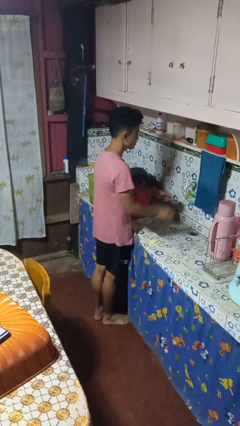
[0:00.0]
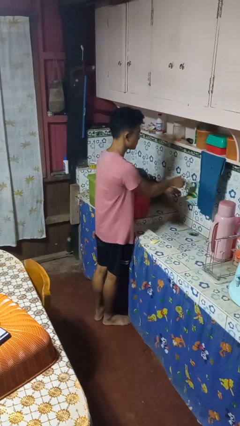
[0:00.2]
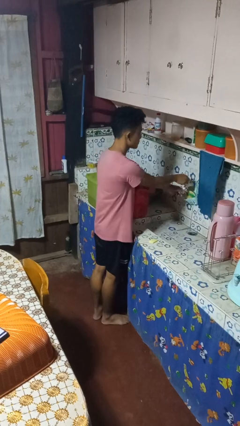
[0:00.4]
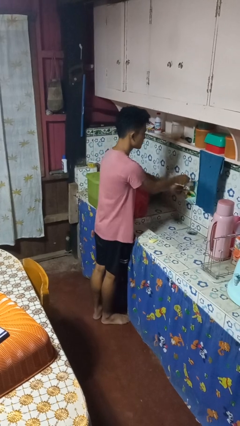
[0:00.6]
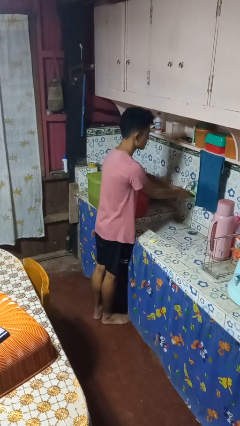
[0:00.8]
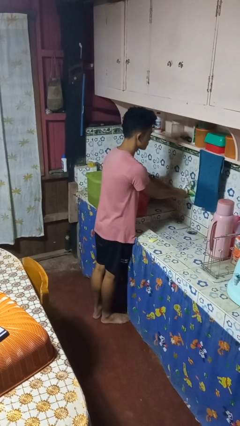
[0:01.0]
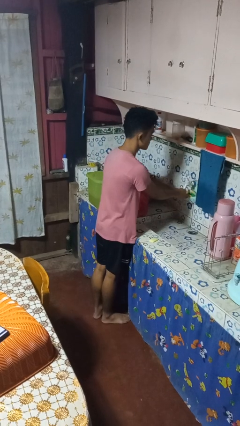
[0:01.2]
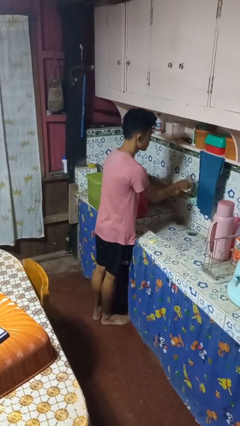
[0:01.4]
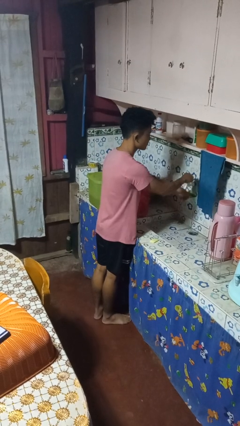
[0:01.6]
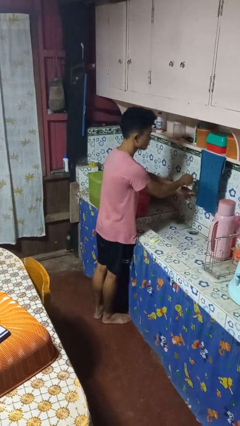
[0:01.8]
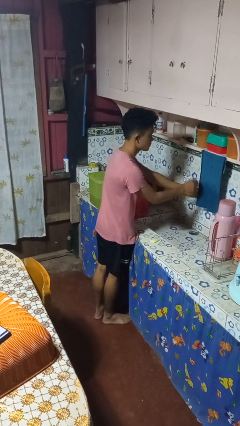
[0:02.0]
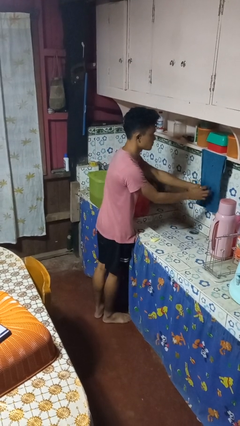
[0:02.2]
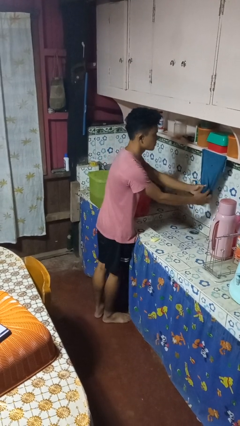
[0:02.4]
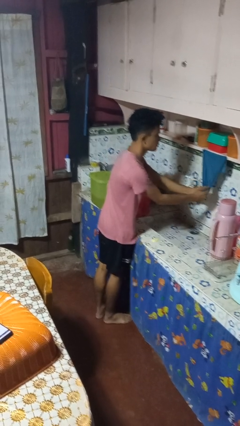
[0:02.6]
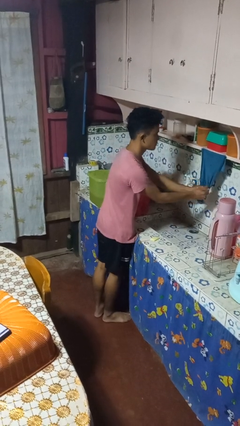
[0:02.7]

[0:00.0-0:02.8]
person washes hands

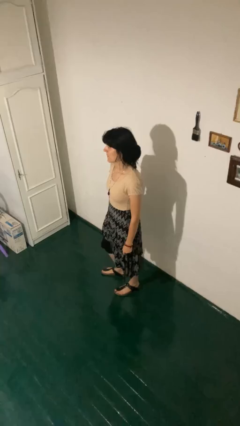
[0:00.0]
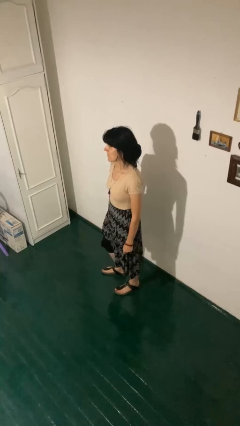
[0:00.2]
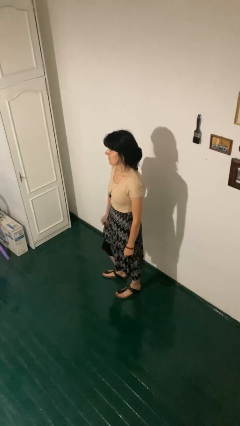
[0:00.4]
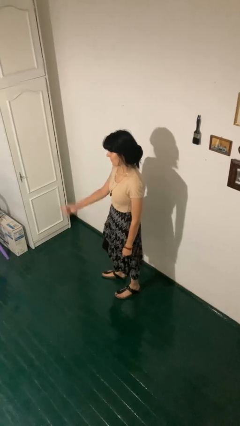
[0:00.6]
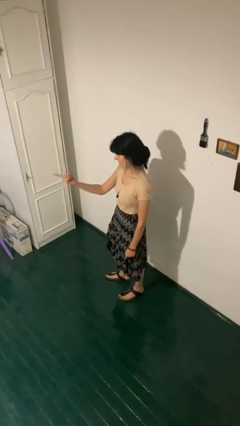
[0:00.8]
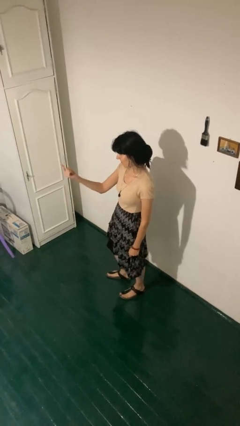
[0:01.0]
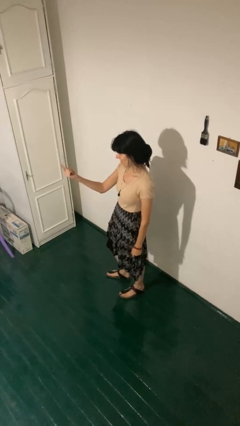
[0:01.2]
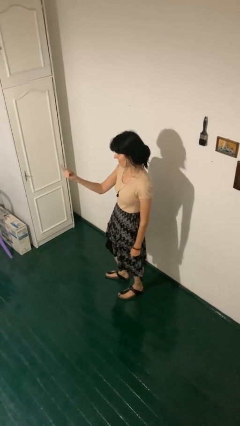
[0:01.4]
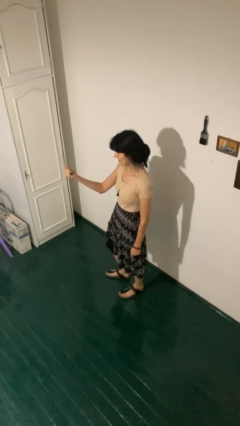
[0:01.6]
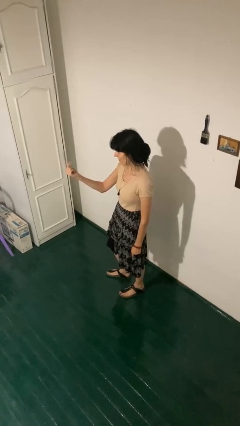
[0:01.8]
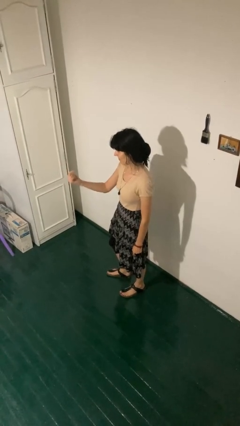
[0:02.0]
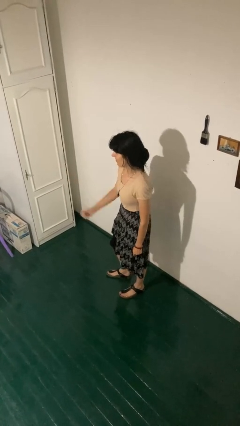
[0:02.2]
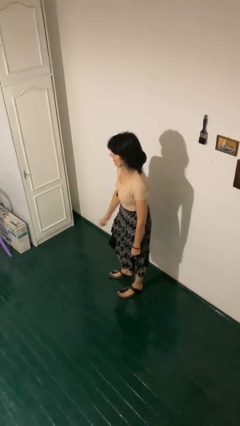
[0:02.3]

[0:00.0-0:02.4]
person gestures come here

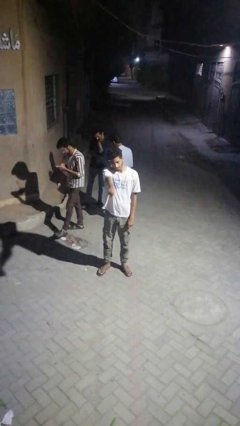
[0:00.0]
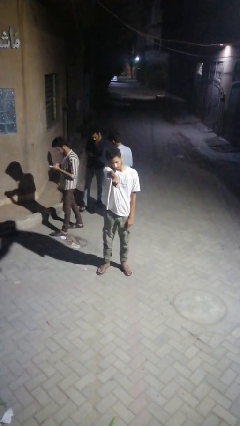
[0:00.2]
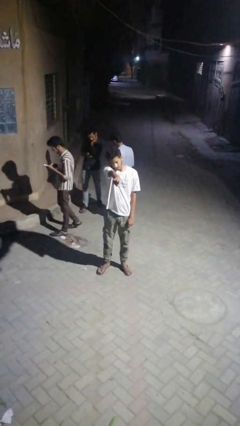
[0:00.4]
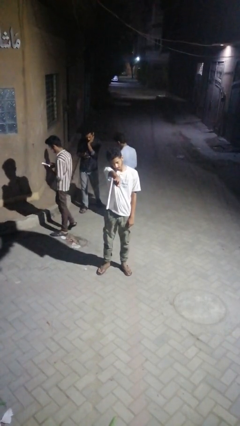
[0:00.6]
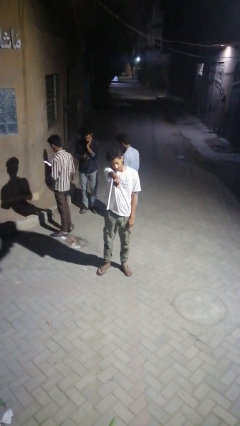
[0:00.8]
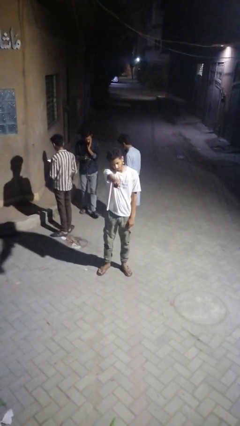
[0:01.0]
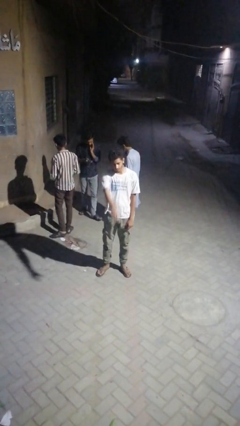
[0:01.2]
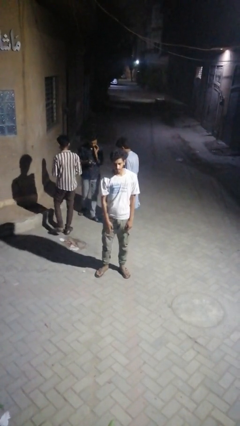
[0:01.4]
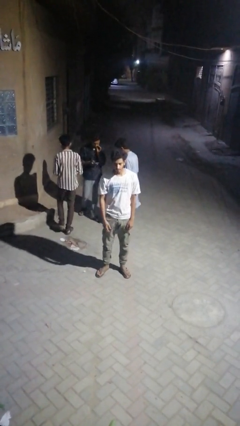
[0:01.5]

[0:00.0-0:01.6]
person points at person

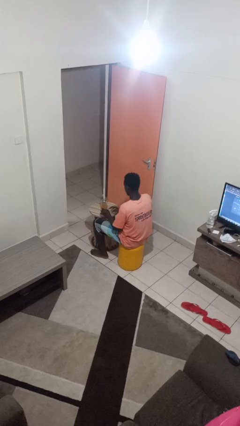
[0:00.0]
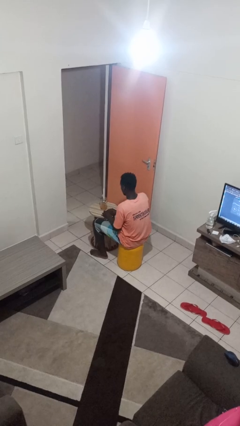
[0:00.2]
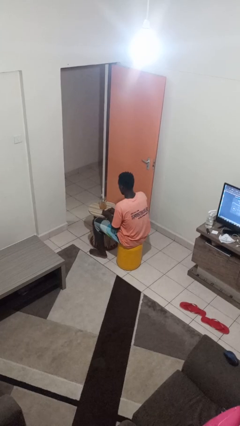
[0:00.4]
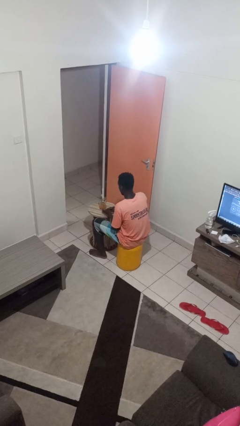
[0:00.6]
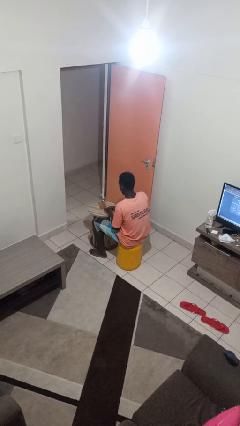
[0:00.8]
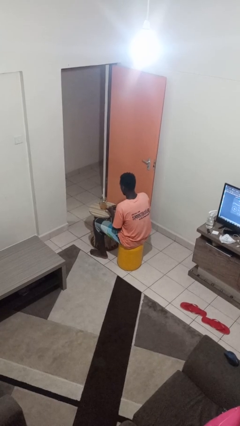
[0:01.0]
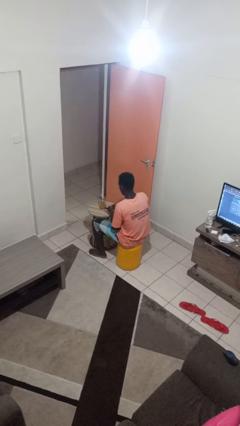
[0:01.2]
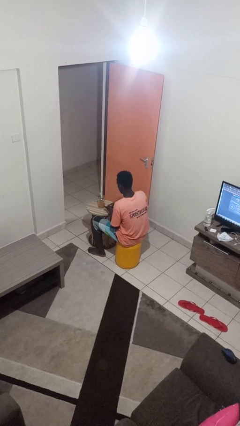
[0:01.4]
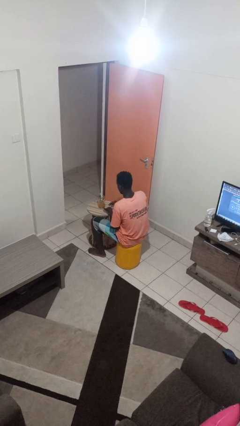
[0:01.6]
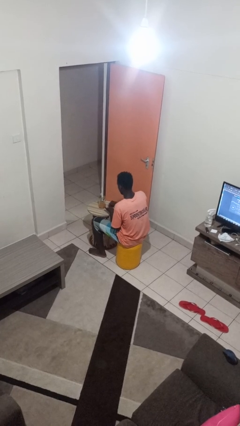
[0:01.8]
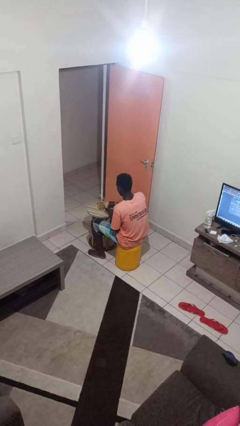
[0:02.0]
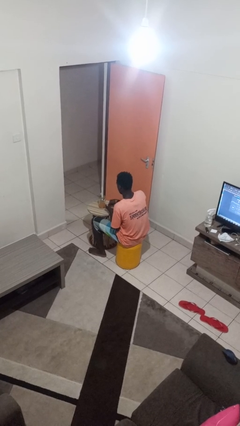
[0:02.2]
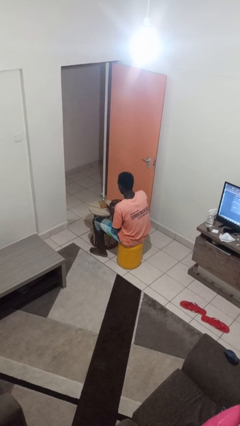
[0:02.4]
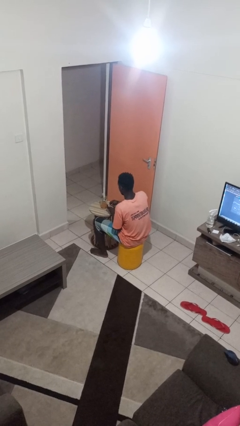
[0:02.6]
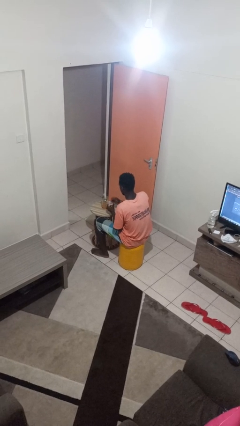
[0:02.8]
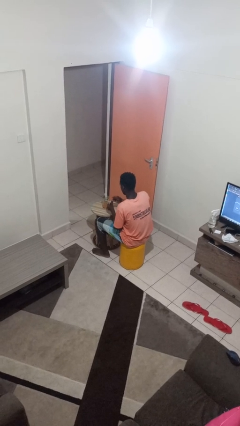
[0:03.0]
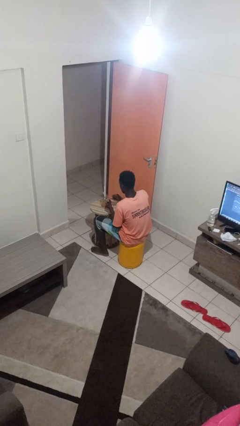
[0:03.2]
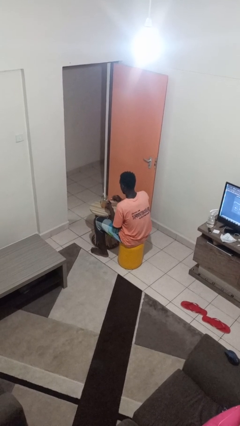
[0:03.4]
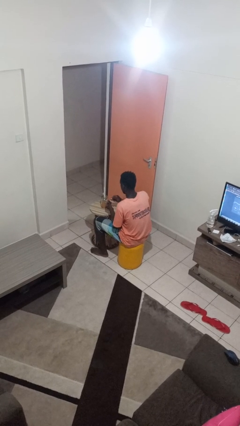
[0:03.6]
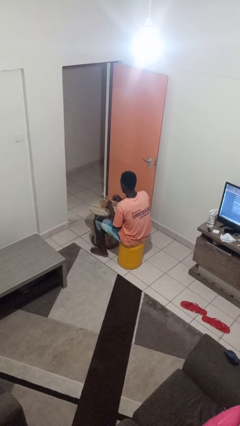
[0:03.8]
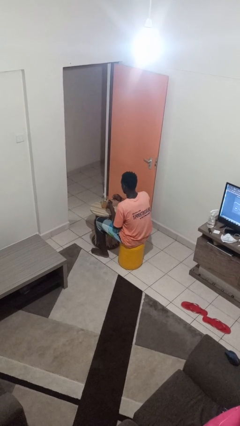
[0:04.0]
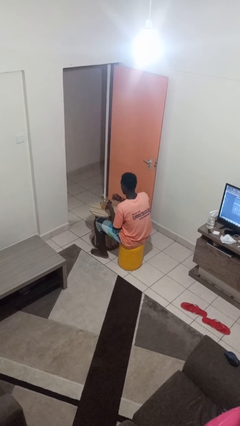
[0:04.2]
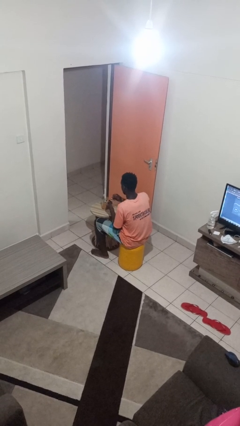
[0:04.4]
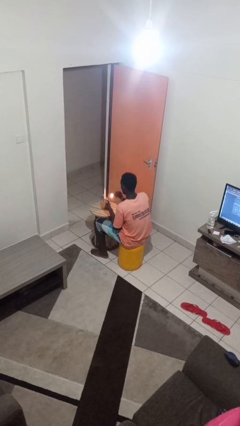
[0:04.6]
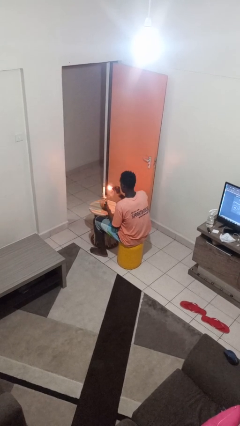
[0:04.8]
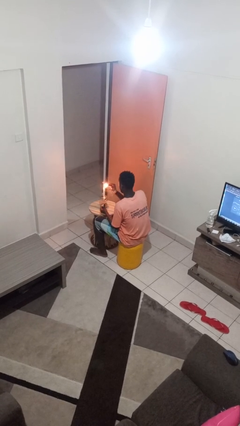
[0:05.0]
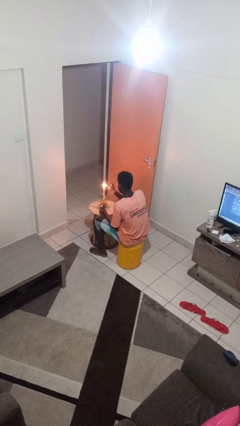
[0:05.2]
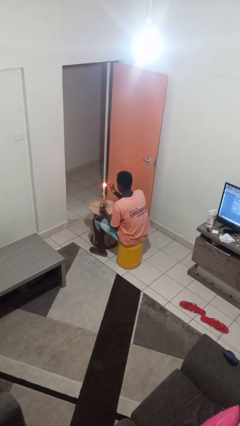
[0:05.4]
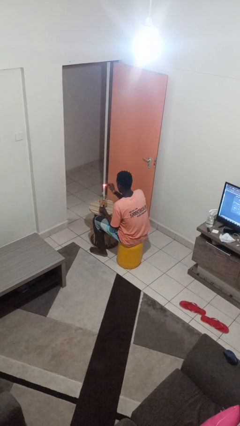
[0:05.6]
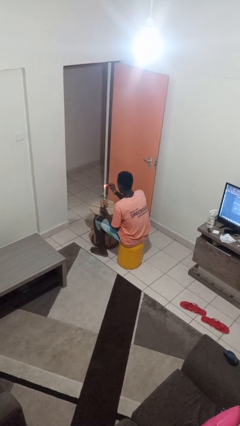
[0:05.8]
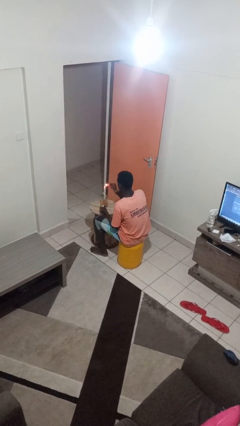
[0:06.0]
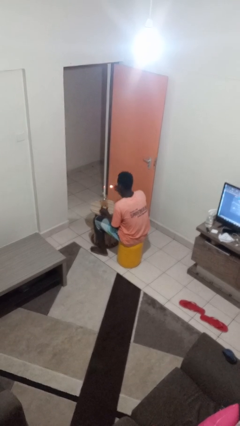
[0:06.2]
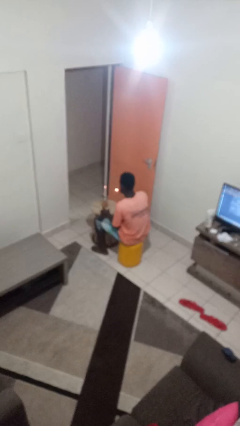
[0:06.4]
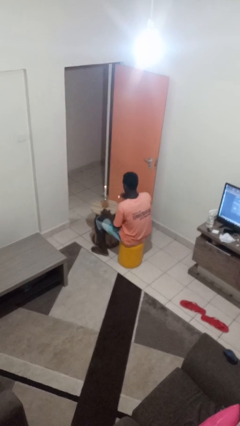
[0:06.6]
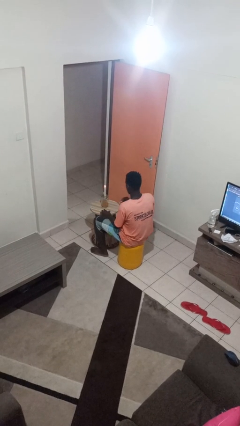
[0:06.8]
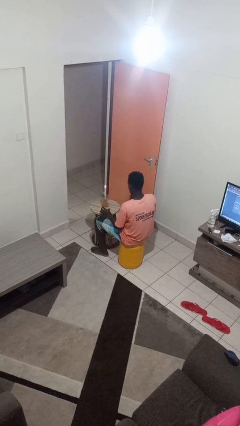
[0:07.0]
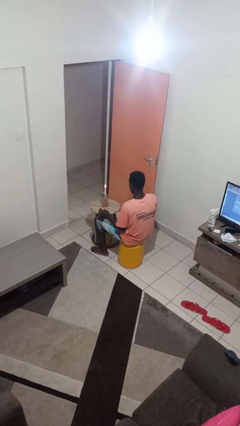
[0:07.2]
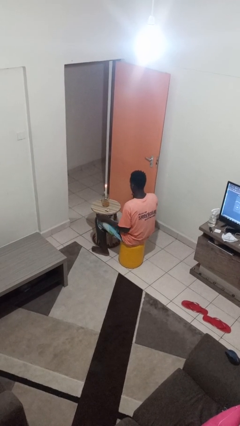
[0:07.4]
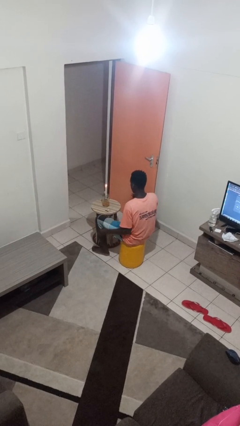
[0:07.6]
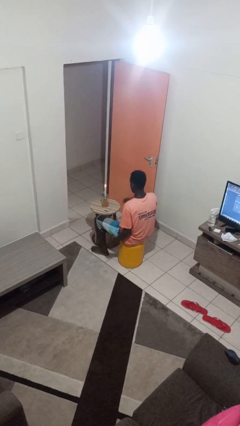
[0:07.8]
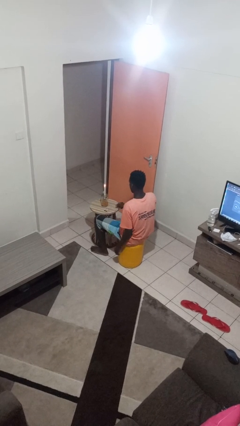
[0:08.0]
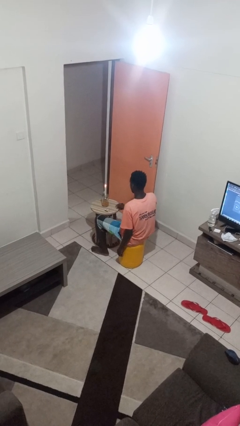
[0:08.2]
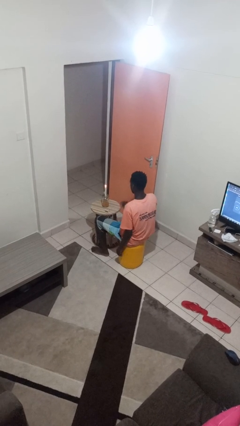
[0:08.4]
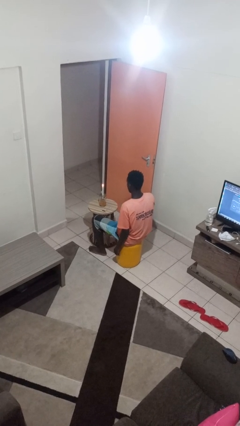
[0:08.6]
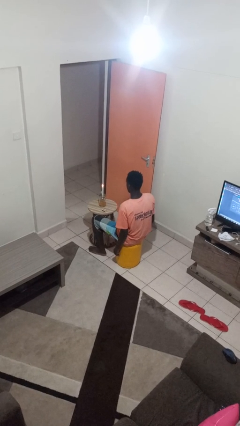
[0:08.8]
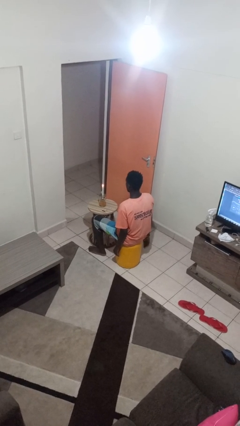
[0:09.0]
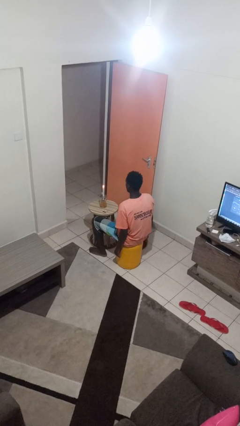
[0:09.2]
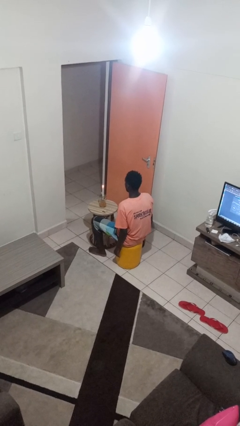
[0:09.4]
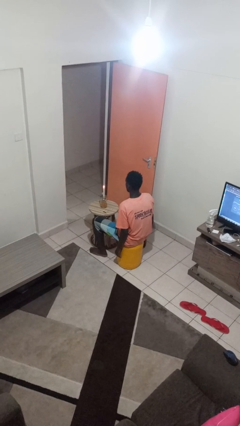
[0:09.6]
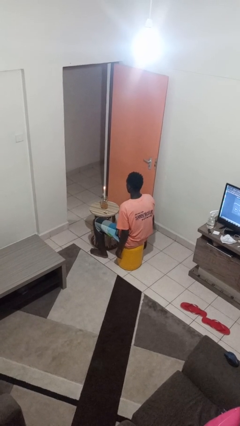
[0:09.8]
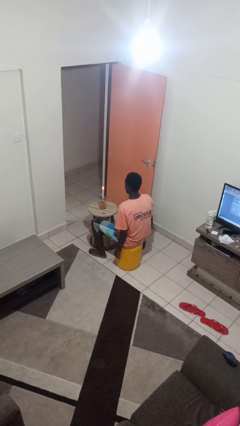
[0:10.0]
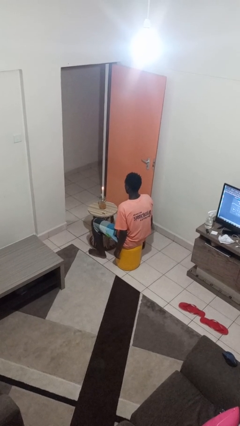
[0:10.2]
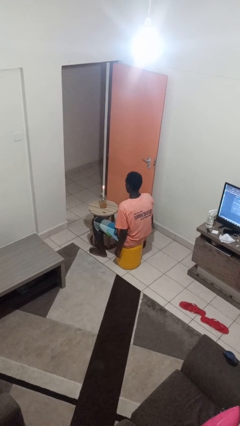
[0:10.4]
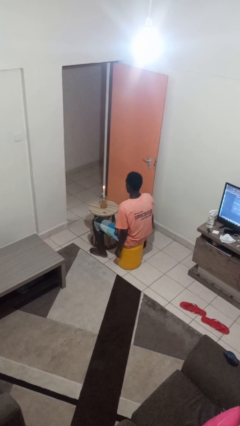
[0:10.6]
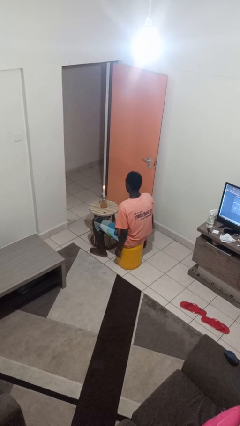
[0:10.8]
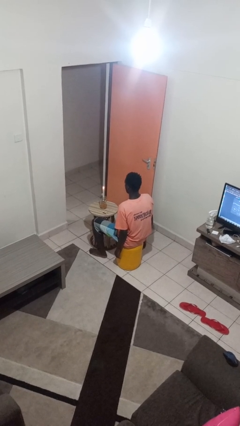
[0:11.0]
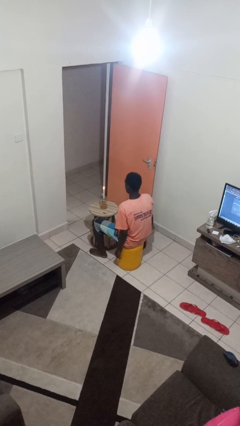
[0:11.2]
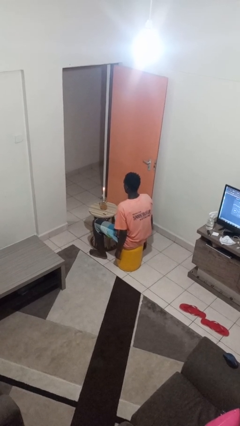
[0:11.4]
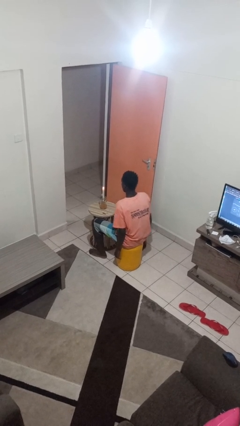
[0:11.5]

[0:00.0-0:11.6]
person lights candle
